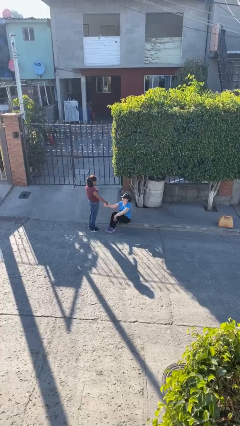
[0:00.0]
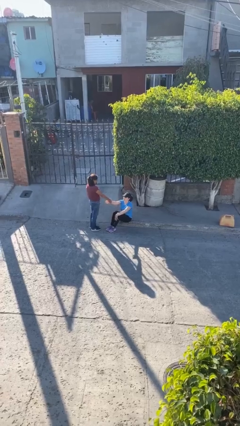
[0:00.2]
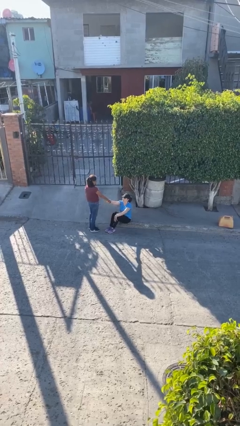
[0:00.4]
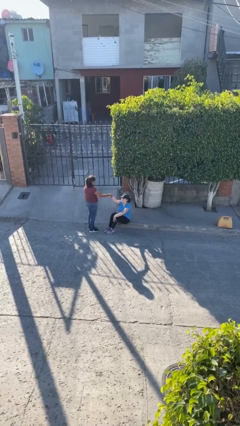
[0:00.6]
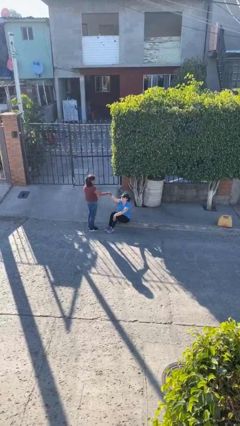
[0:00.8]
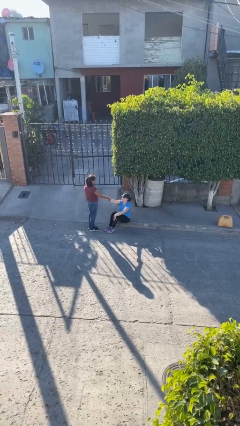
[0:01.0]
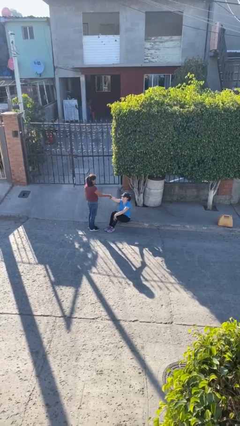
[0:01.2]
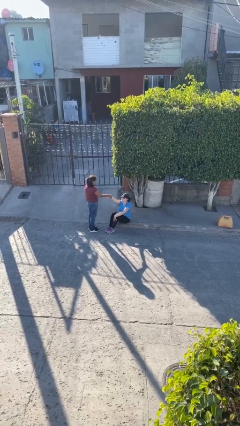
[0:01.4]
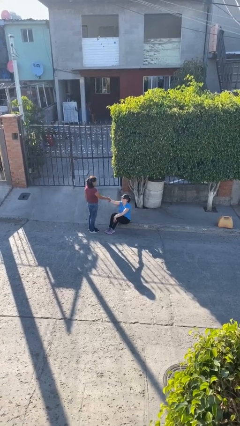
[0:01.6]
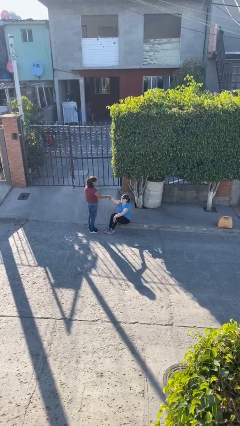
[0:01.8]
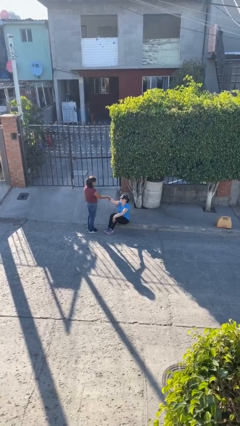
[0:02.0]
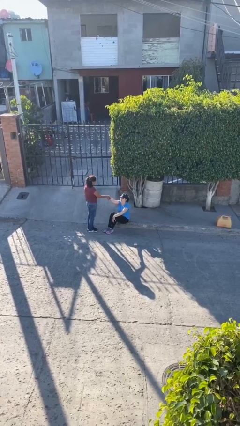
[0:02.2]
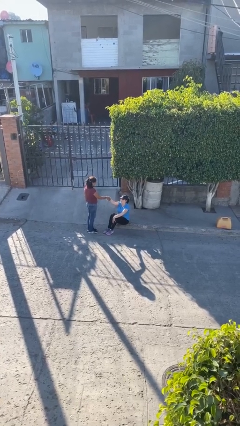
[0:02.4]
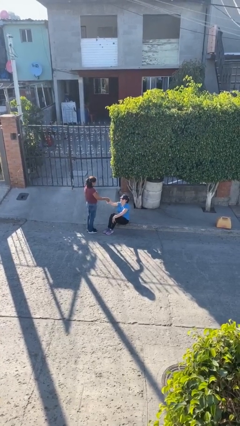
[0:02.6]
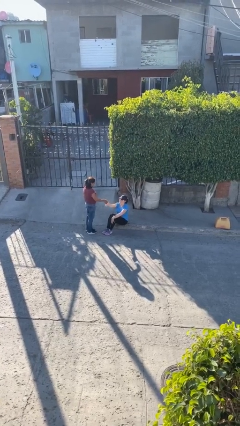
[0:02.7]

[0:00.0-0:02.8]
person shakes hand

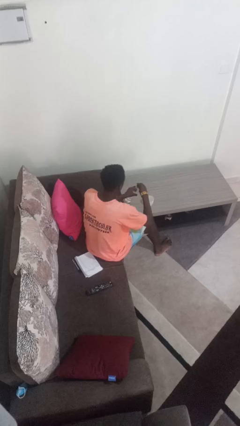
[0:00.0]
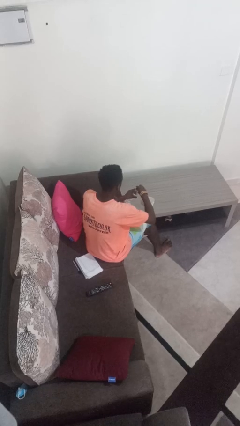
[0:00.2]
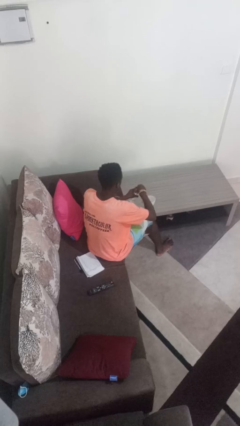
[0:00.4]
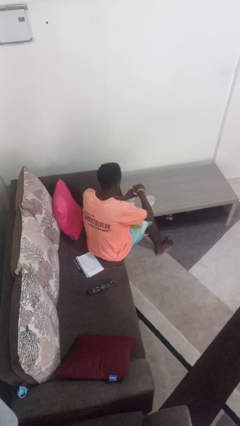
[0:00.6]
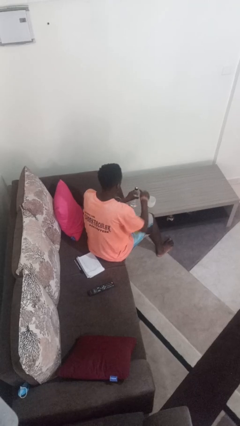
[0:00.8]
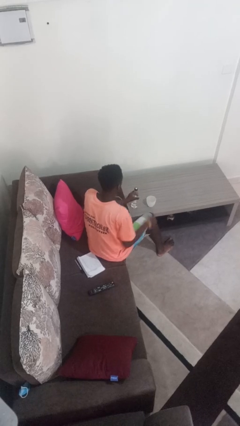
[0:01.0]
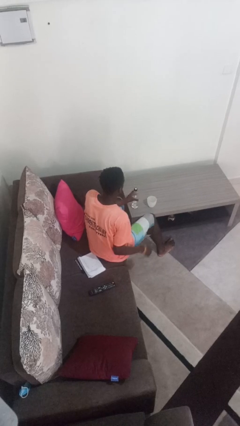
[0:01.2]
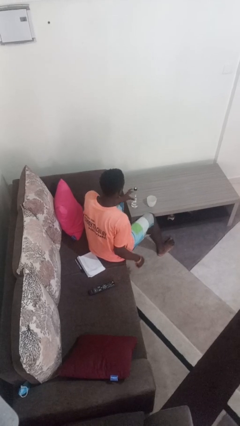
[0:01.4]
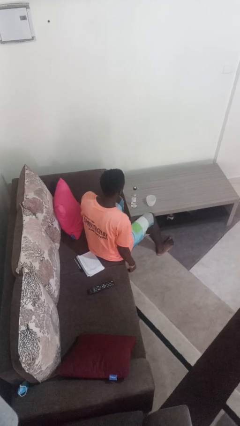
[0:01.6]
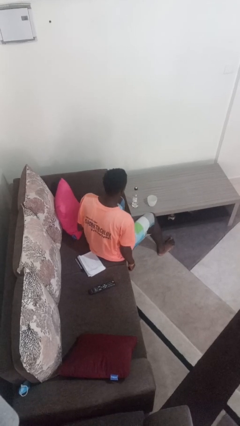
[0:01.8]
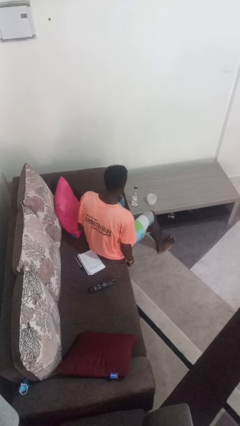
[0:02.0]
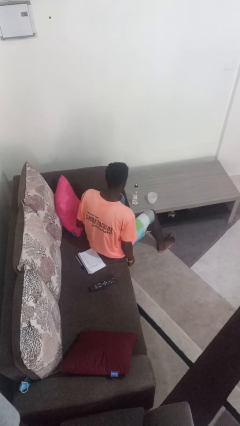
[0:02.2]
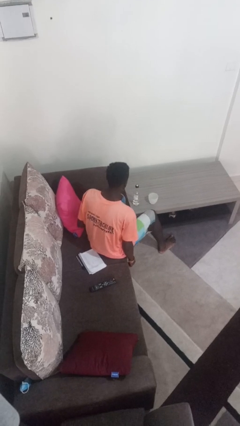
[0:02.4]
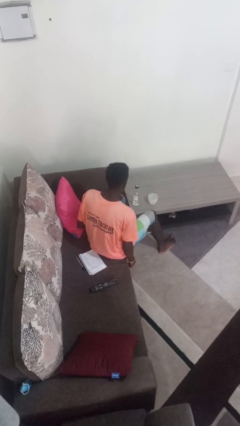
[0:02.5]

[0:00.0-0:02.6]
person screws lid to bottle

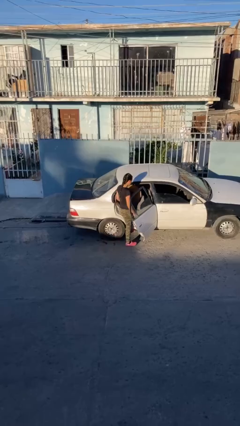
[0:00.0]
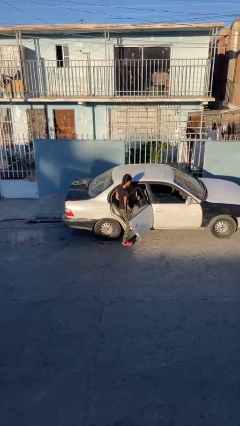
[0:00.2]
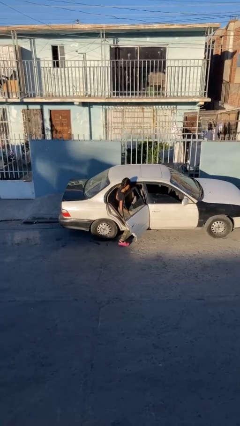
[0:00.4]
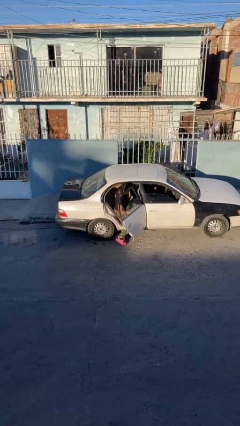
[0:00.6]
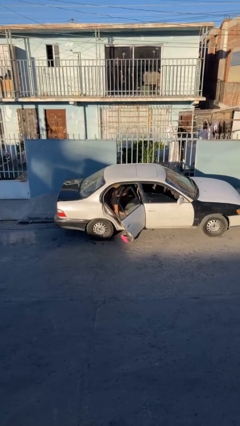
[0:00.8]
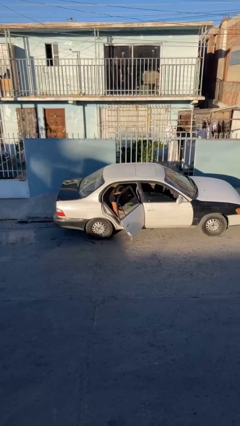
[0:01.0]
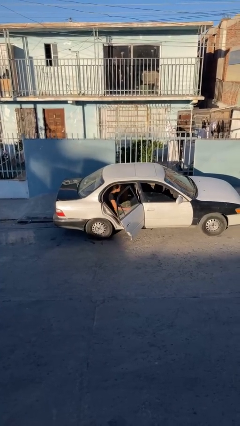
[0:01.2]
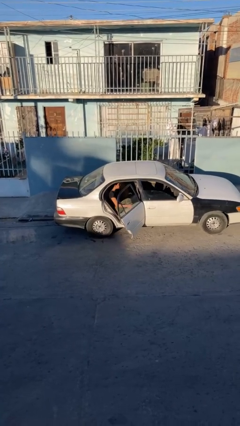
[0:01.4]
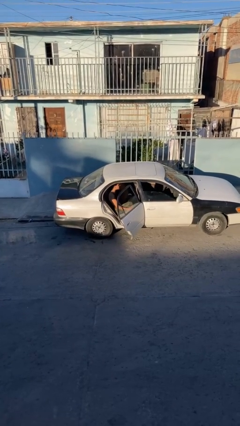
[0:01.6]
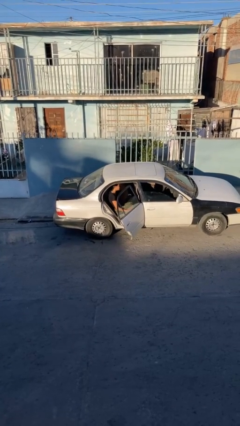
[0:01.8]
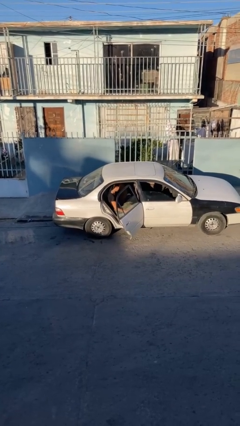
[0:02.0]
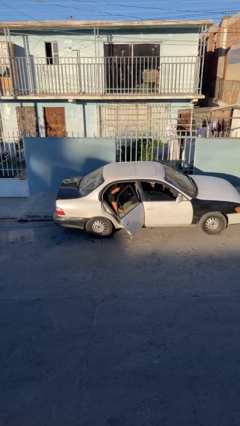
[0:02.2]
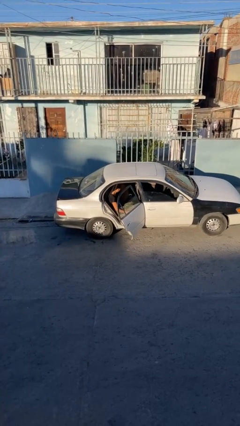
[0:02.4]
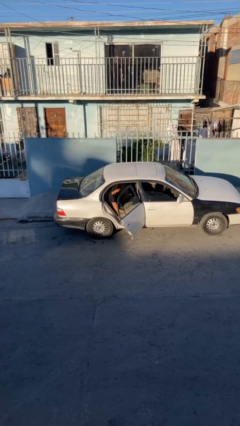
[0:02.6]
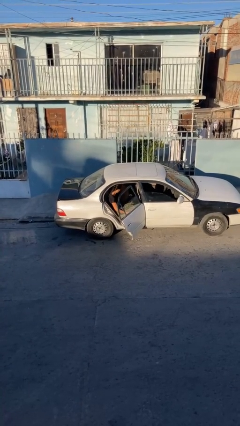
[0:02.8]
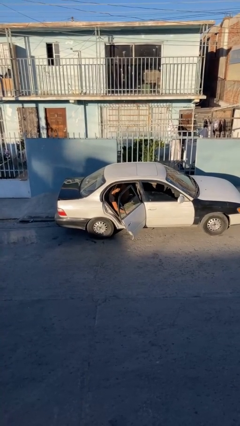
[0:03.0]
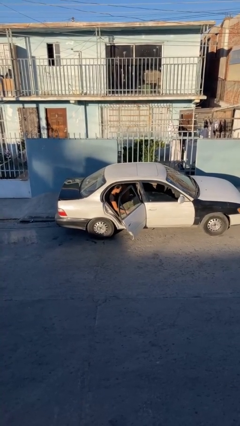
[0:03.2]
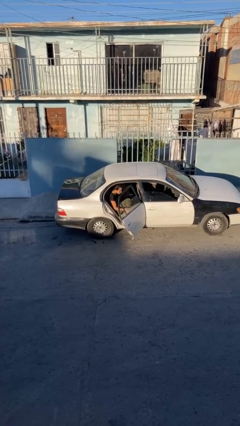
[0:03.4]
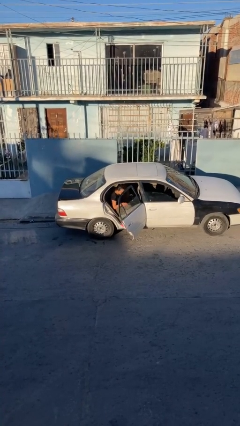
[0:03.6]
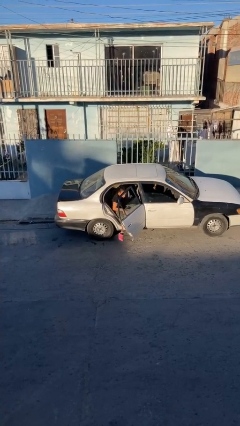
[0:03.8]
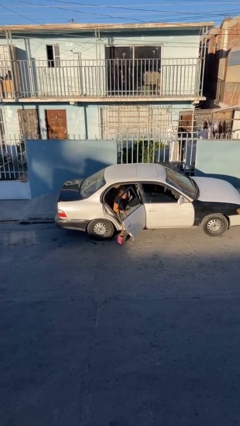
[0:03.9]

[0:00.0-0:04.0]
person enters car

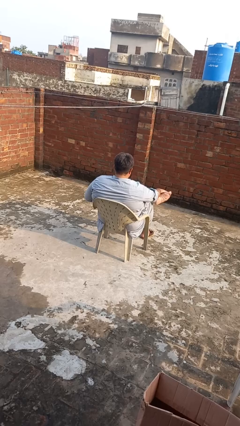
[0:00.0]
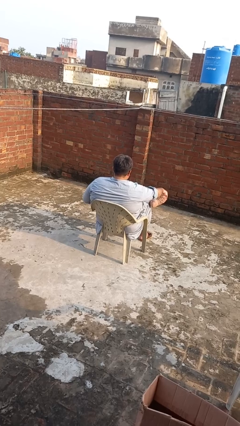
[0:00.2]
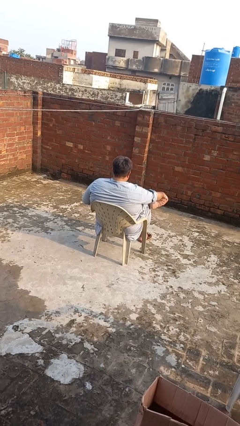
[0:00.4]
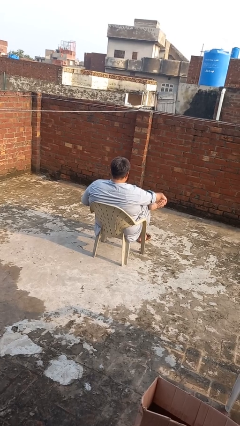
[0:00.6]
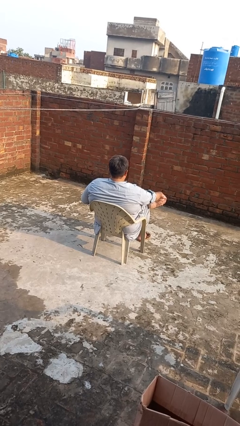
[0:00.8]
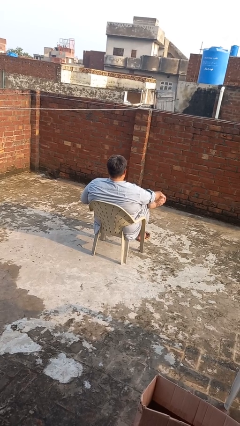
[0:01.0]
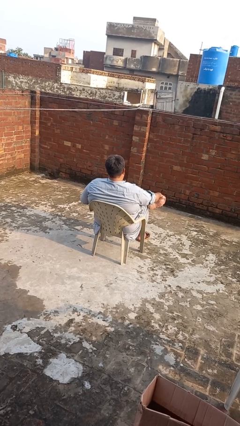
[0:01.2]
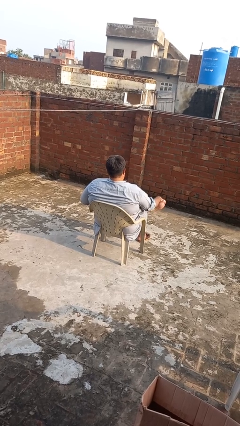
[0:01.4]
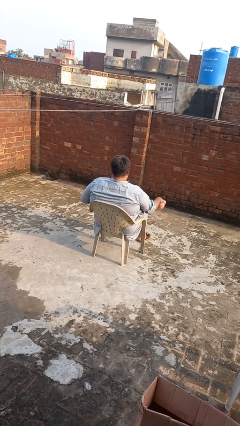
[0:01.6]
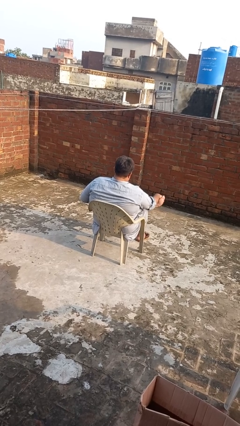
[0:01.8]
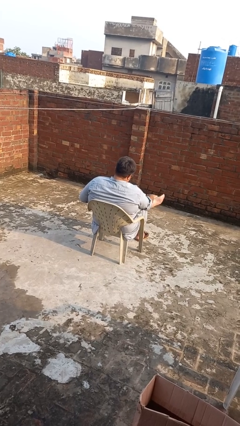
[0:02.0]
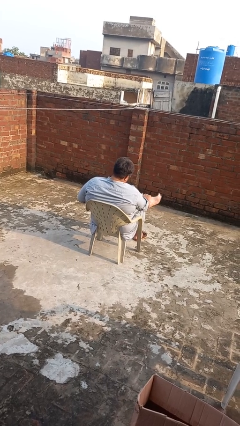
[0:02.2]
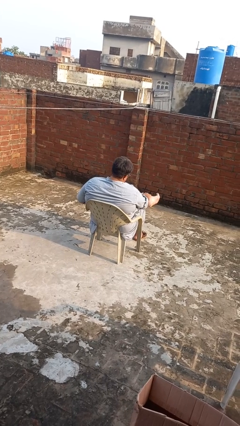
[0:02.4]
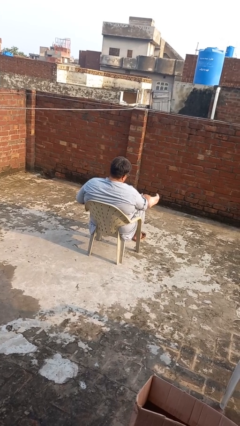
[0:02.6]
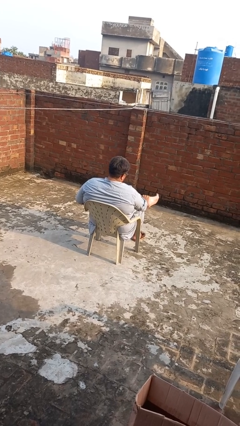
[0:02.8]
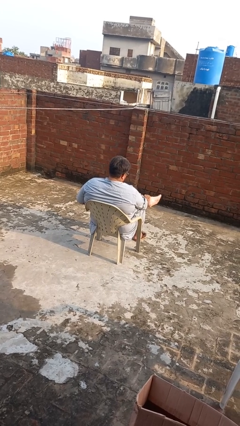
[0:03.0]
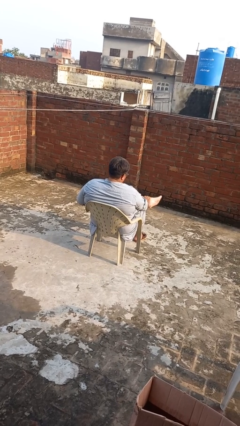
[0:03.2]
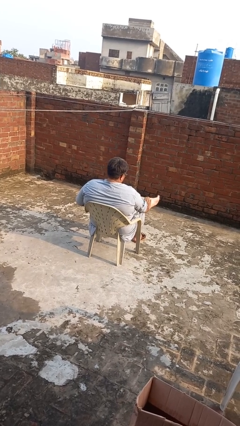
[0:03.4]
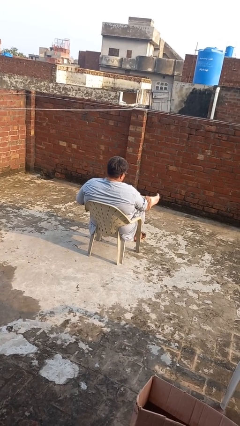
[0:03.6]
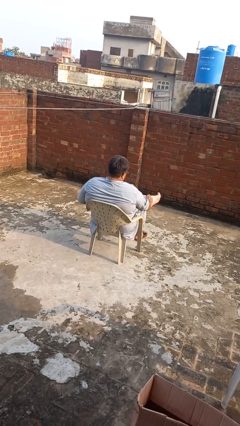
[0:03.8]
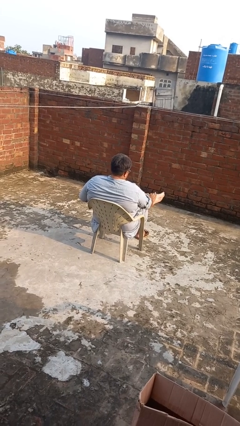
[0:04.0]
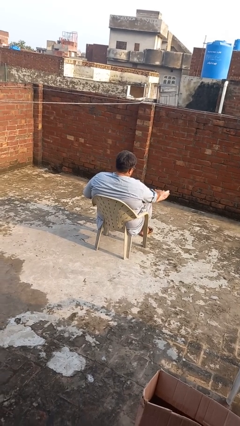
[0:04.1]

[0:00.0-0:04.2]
person rubs foot

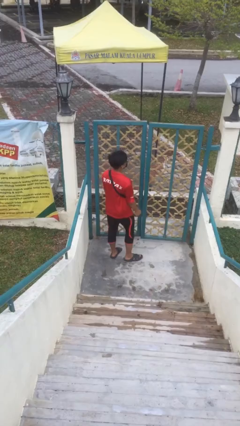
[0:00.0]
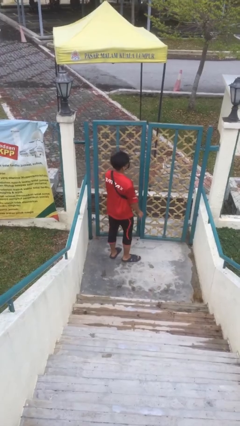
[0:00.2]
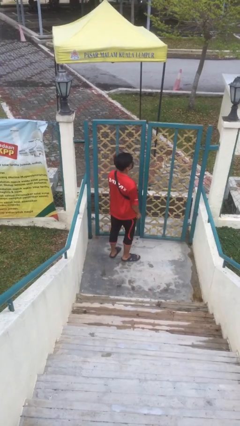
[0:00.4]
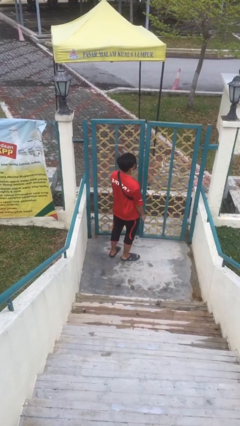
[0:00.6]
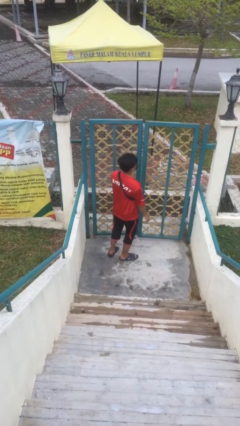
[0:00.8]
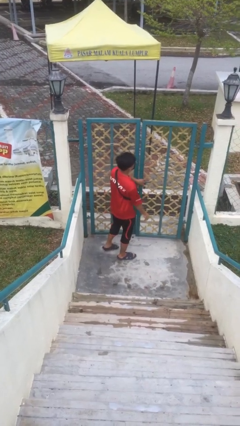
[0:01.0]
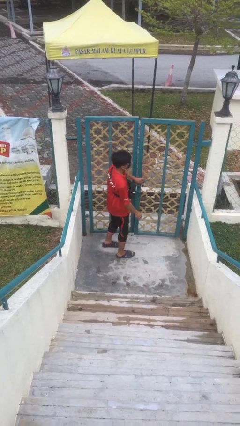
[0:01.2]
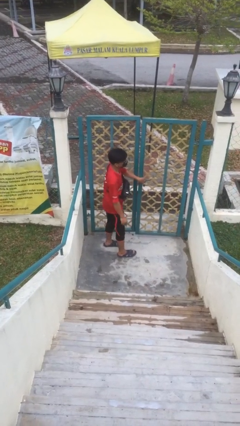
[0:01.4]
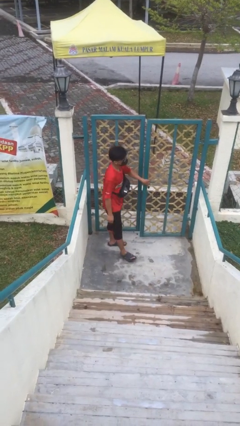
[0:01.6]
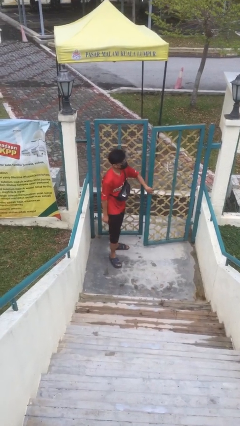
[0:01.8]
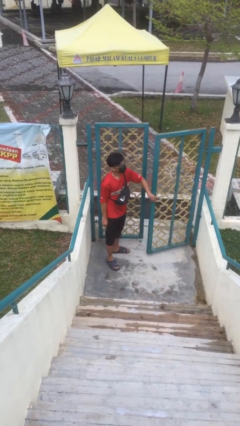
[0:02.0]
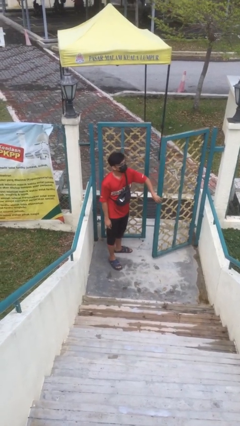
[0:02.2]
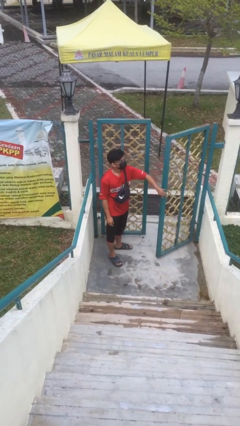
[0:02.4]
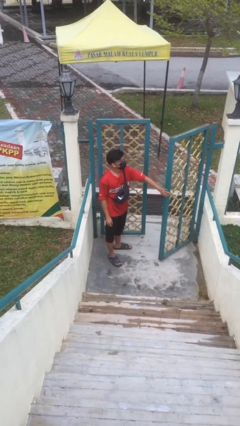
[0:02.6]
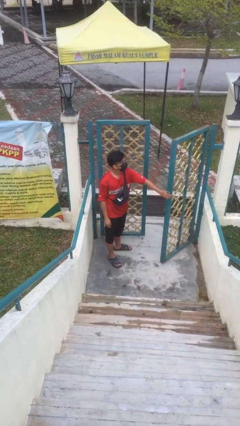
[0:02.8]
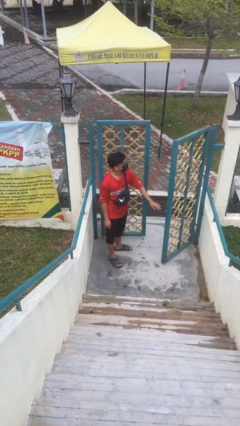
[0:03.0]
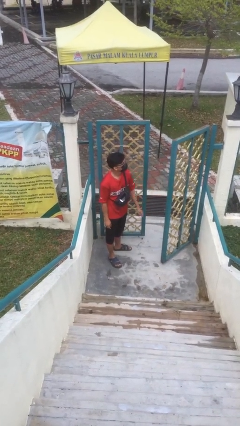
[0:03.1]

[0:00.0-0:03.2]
person opens facility door

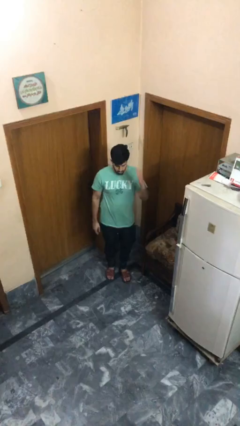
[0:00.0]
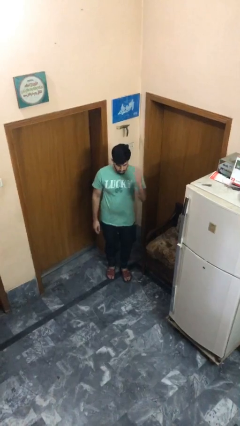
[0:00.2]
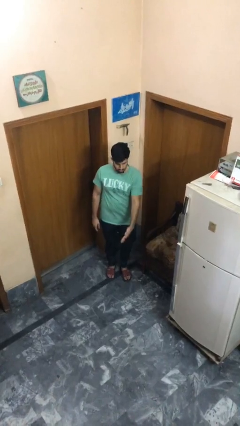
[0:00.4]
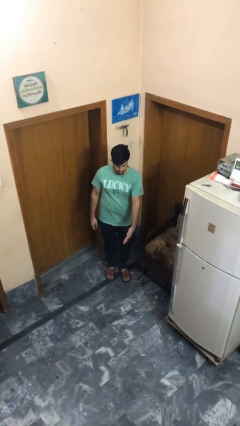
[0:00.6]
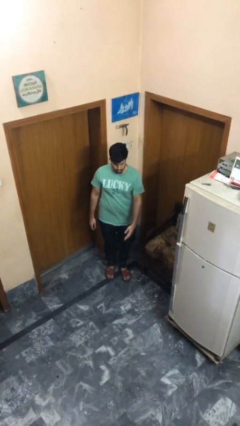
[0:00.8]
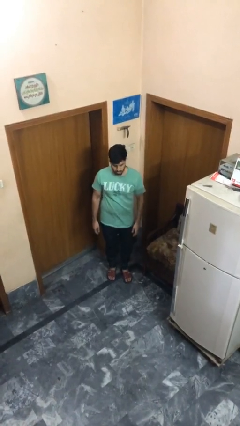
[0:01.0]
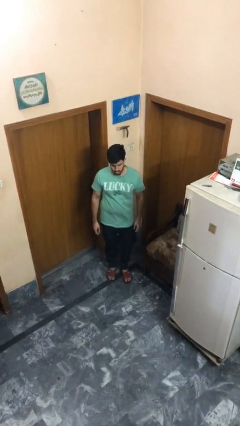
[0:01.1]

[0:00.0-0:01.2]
person karate chop
